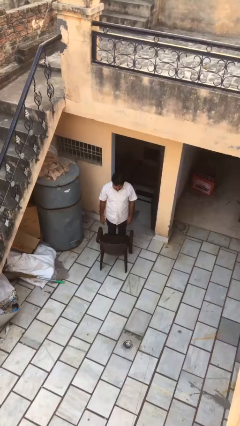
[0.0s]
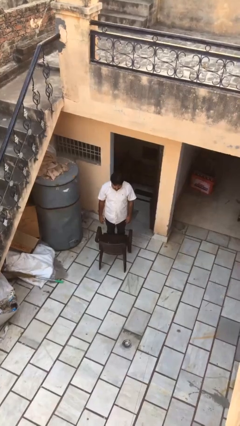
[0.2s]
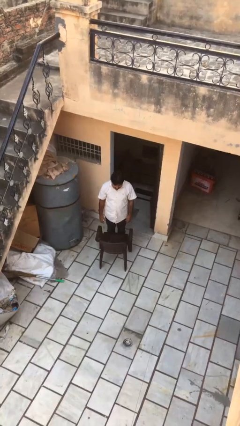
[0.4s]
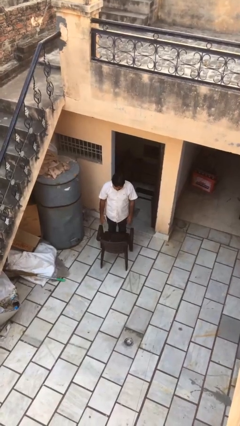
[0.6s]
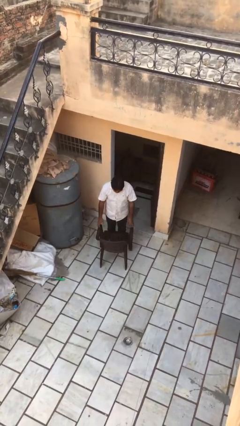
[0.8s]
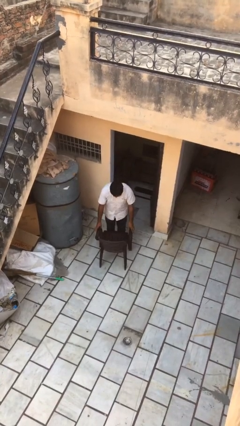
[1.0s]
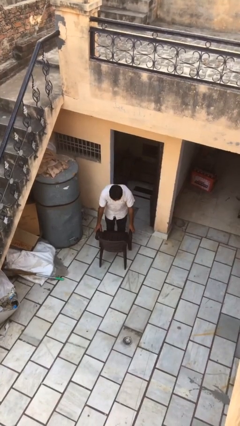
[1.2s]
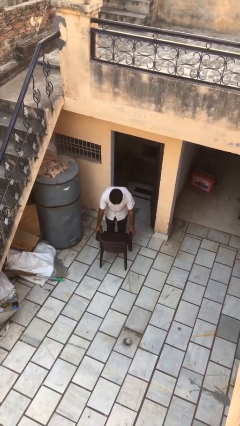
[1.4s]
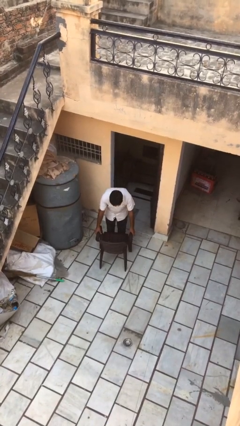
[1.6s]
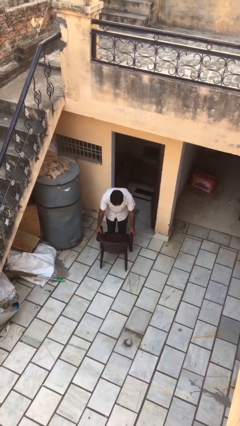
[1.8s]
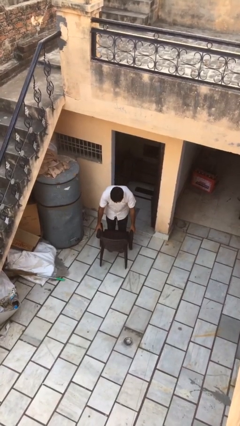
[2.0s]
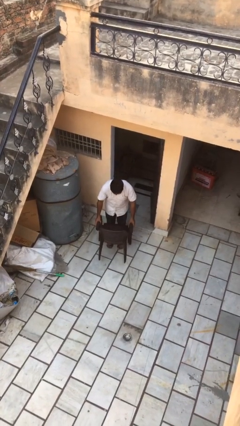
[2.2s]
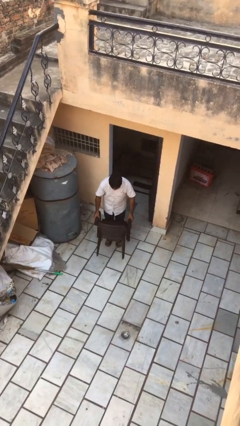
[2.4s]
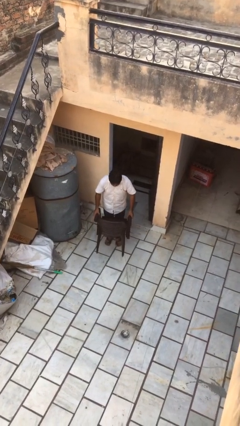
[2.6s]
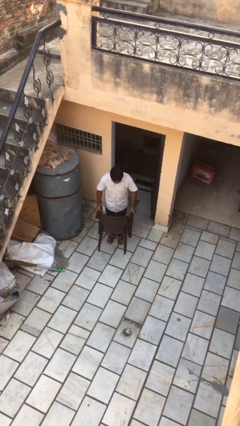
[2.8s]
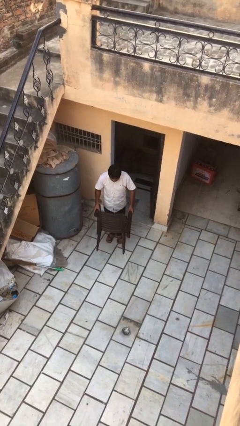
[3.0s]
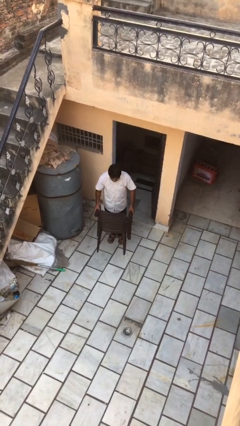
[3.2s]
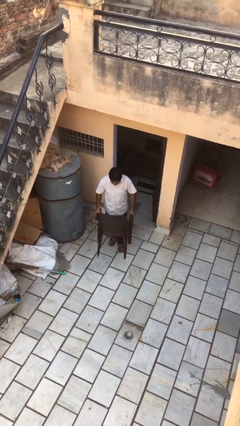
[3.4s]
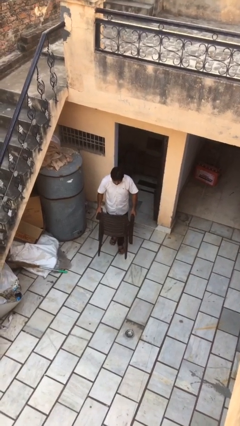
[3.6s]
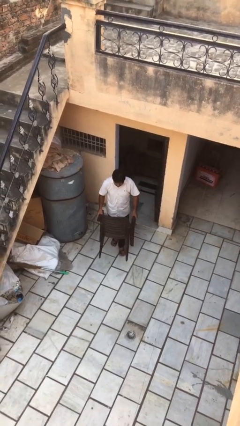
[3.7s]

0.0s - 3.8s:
person picks up object from floor

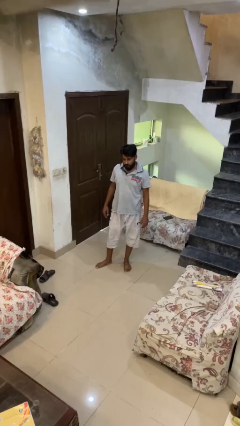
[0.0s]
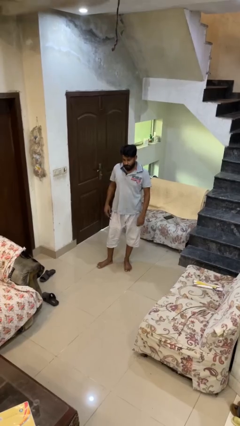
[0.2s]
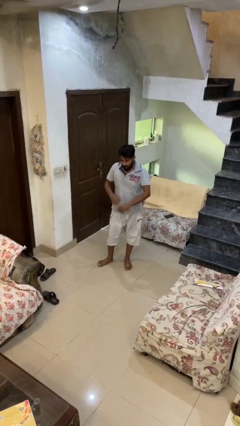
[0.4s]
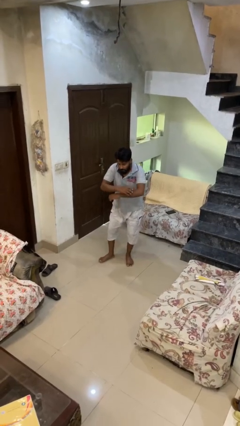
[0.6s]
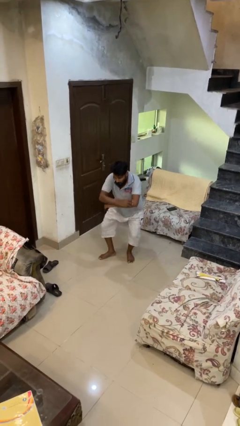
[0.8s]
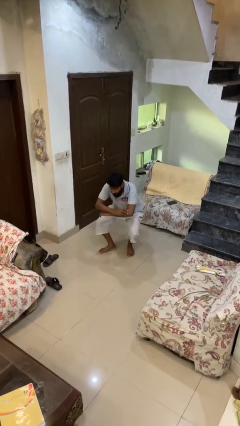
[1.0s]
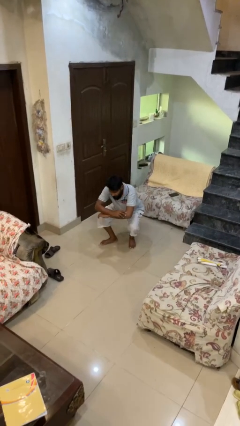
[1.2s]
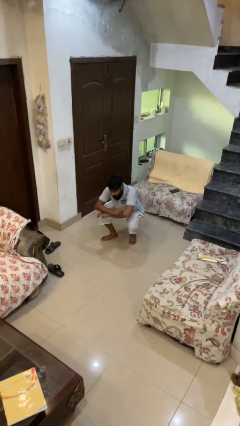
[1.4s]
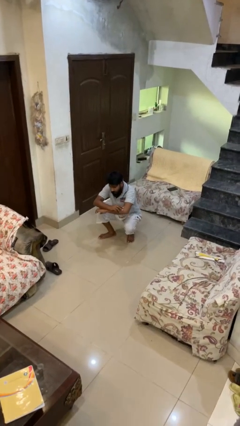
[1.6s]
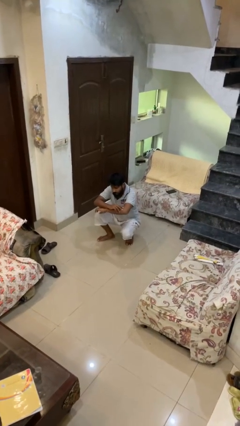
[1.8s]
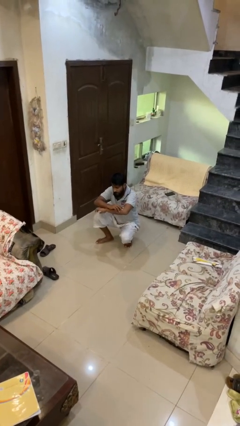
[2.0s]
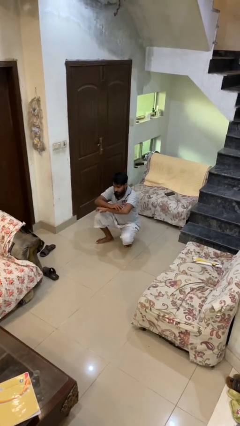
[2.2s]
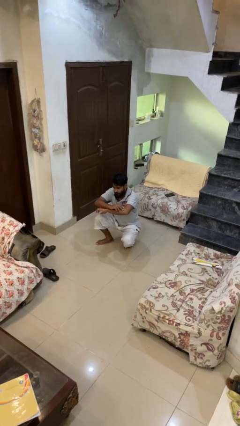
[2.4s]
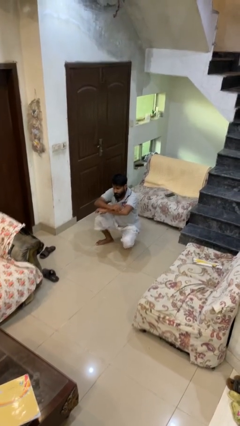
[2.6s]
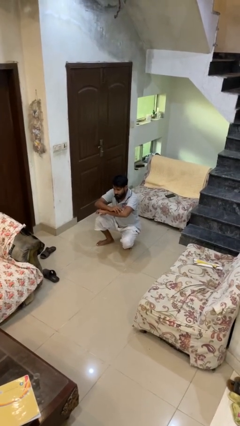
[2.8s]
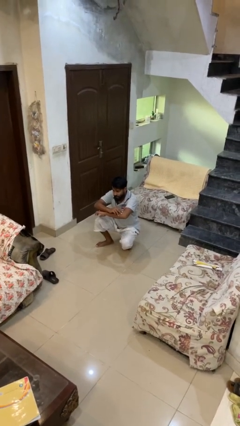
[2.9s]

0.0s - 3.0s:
person squats

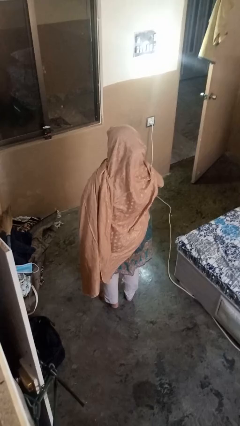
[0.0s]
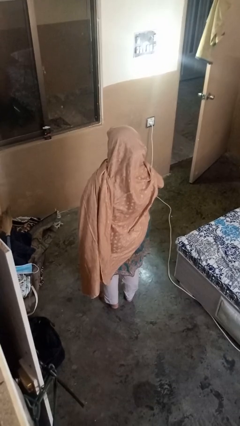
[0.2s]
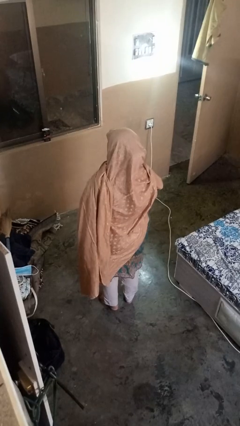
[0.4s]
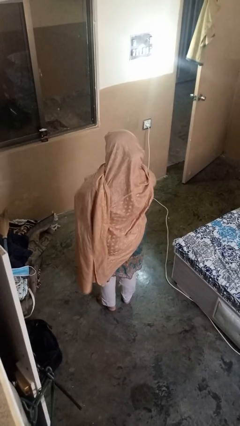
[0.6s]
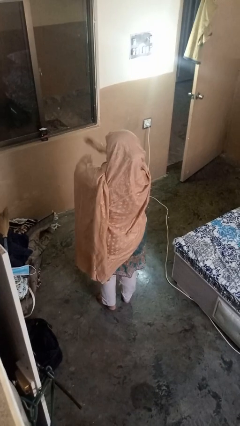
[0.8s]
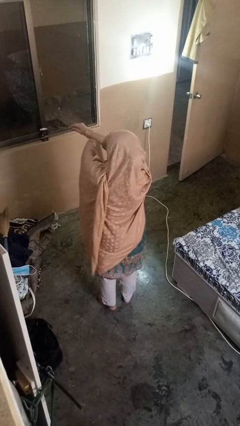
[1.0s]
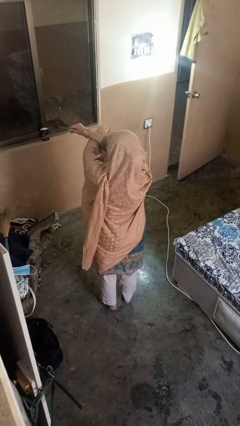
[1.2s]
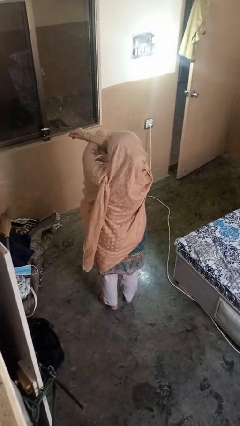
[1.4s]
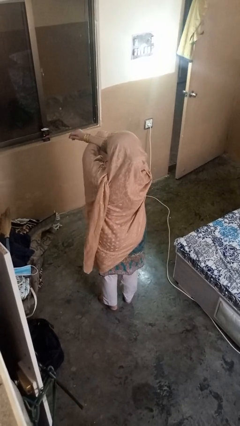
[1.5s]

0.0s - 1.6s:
person crosses arms

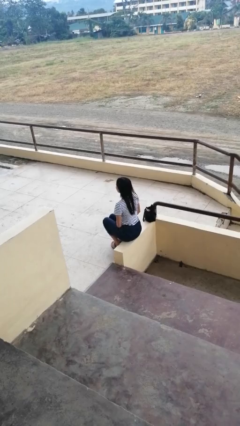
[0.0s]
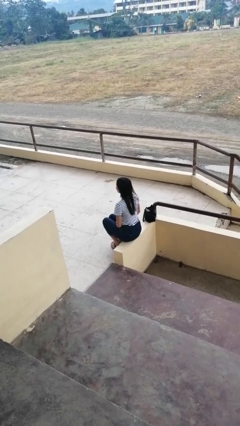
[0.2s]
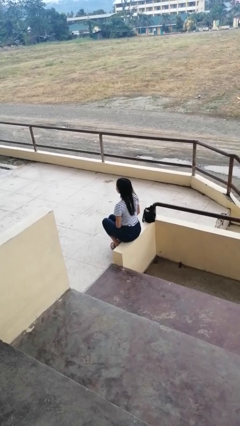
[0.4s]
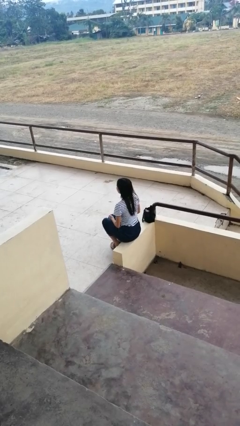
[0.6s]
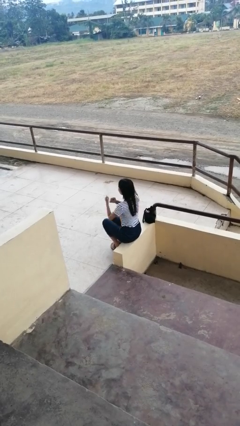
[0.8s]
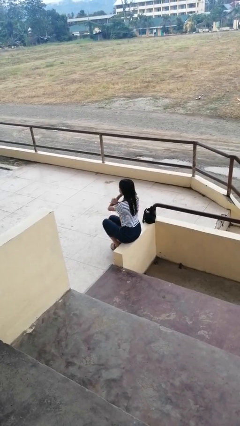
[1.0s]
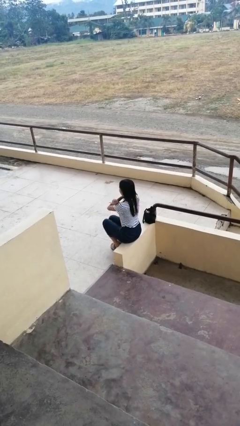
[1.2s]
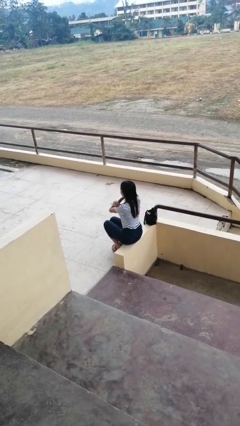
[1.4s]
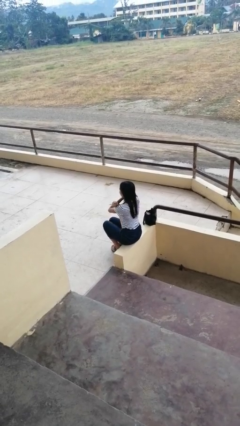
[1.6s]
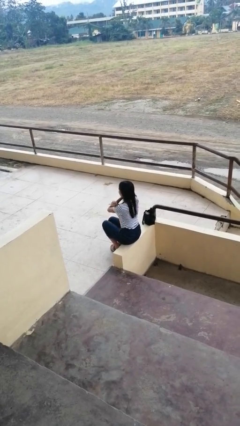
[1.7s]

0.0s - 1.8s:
person gestures arms x

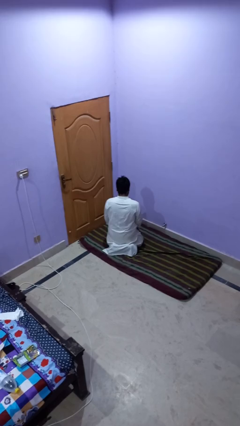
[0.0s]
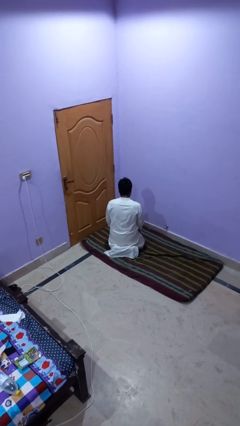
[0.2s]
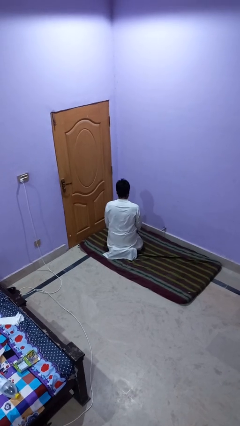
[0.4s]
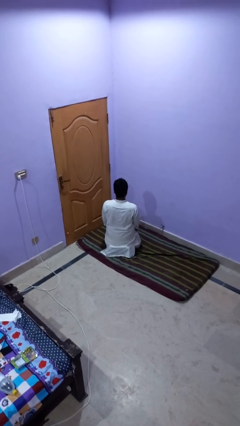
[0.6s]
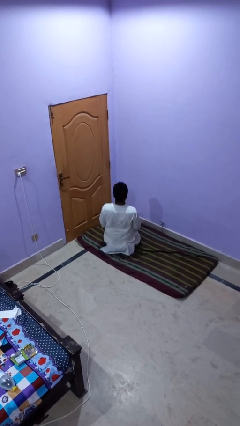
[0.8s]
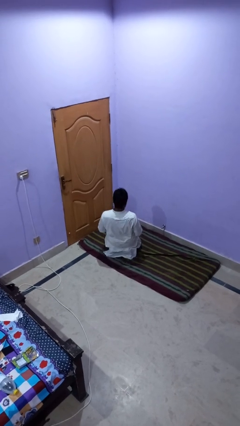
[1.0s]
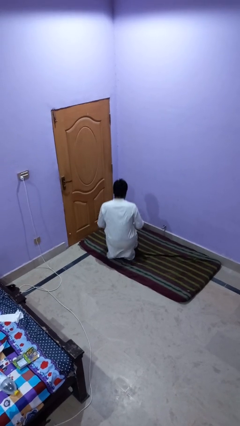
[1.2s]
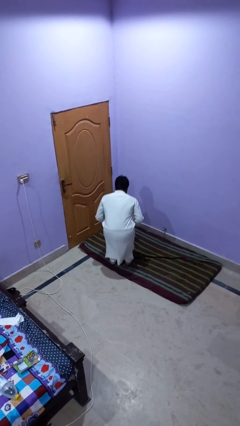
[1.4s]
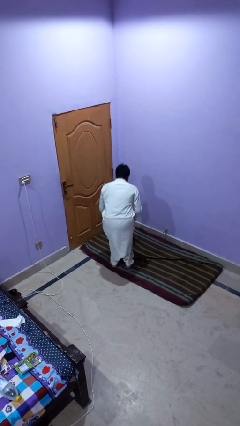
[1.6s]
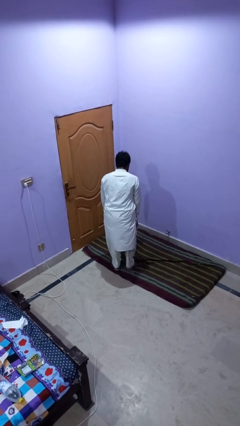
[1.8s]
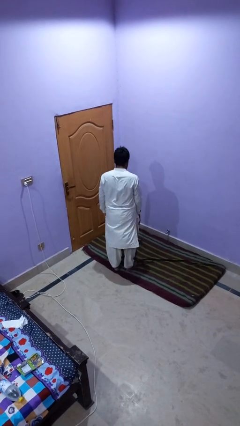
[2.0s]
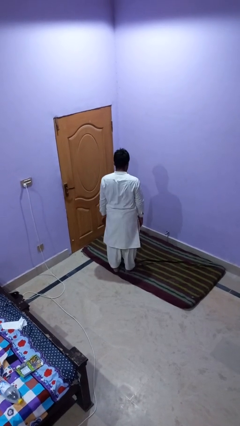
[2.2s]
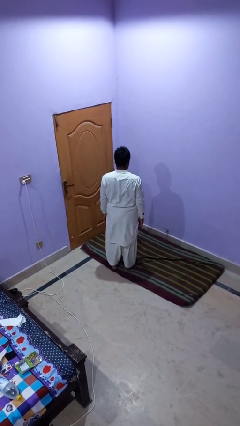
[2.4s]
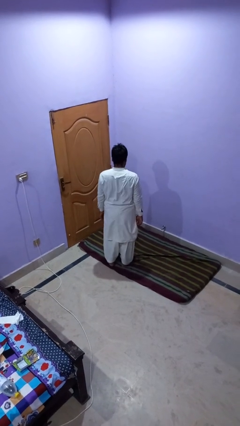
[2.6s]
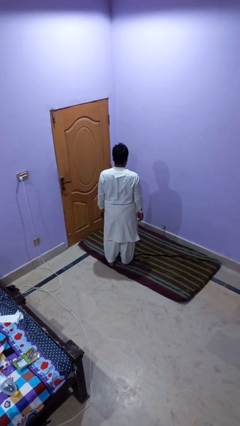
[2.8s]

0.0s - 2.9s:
person stands up from floor

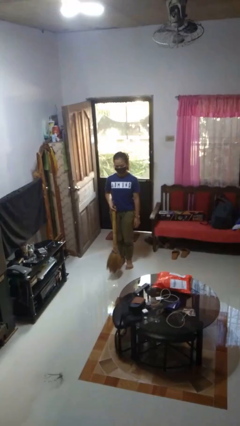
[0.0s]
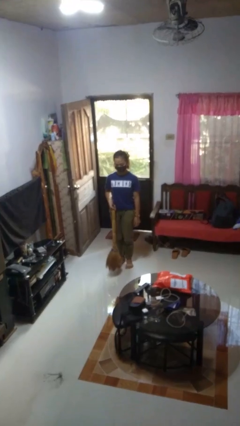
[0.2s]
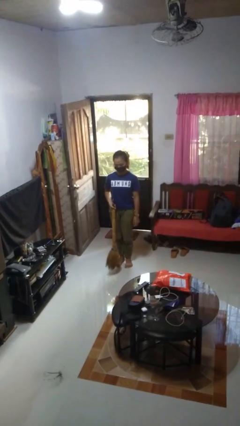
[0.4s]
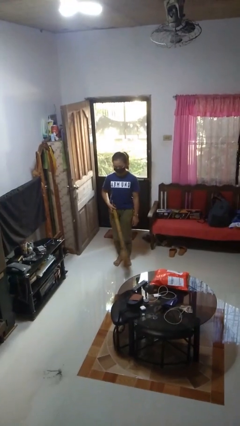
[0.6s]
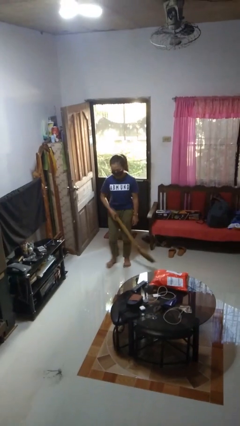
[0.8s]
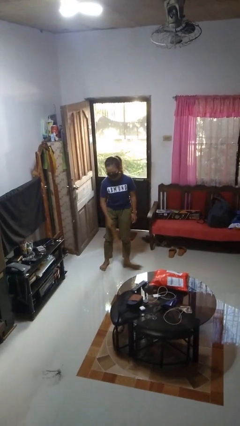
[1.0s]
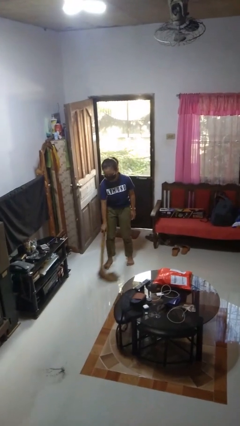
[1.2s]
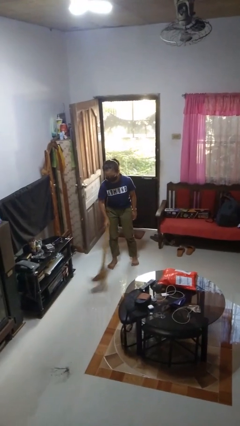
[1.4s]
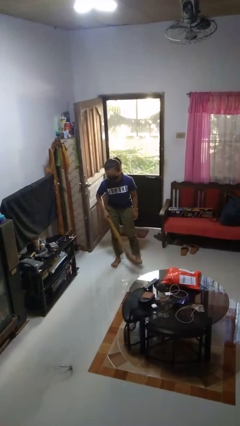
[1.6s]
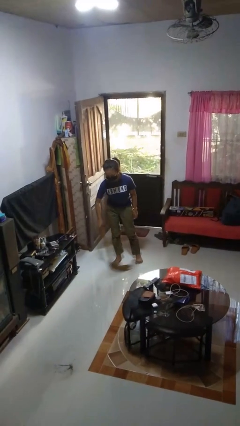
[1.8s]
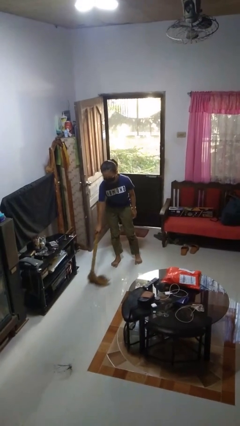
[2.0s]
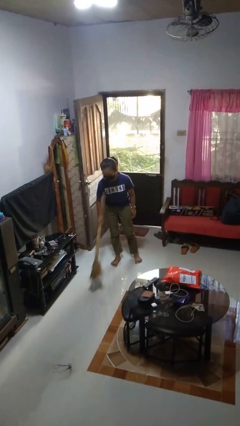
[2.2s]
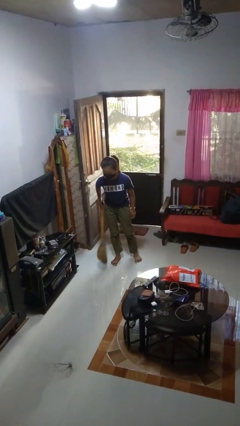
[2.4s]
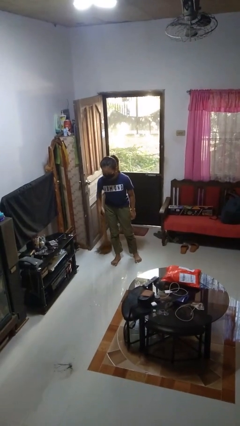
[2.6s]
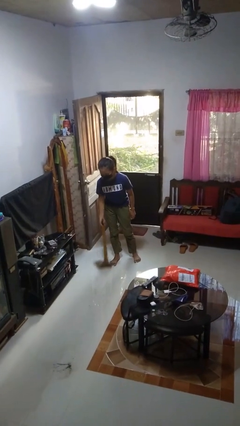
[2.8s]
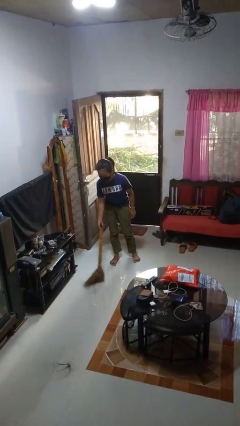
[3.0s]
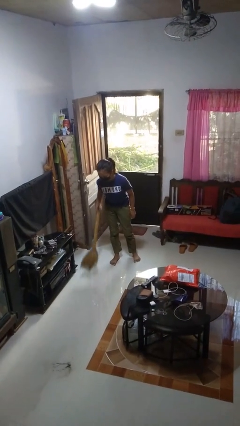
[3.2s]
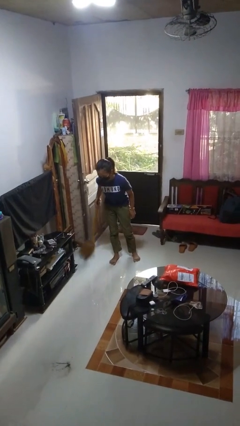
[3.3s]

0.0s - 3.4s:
person sweeps floor

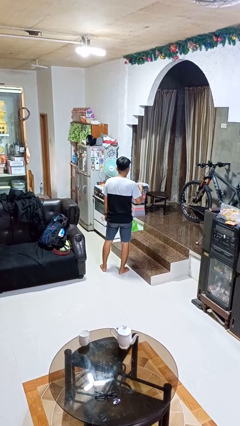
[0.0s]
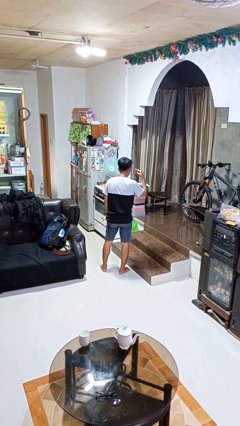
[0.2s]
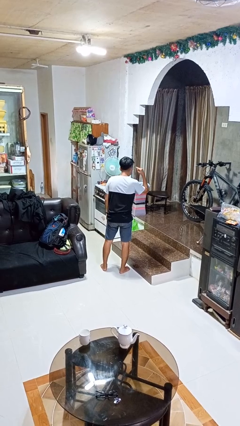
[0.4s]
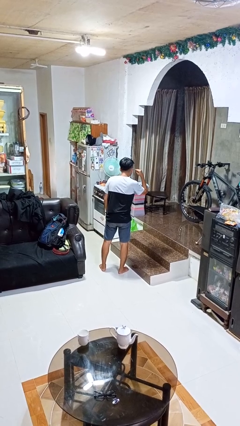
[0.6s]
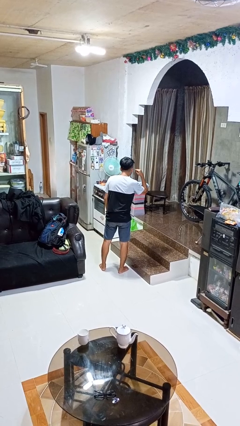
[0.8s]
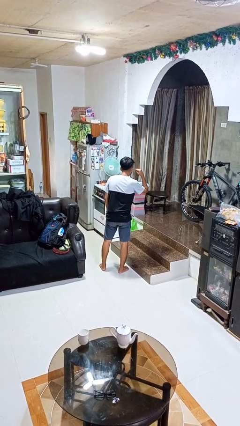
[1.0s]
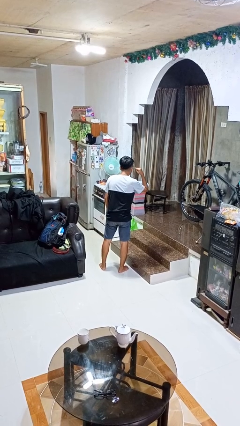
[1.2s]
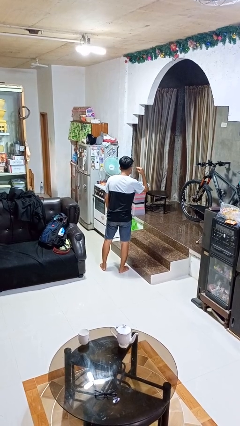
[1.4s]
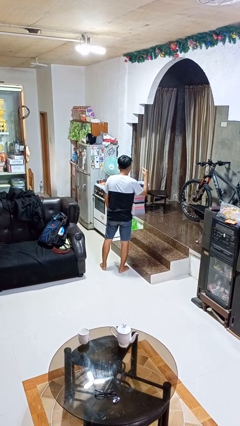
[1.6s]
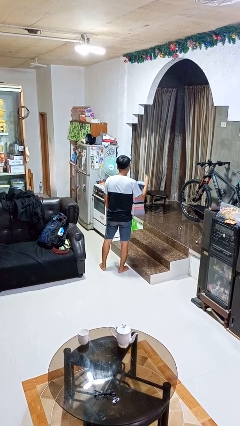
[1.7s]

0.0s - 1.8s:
person gestures listen closely
